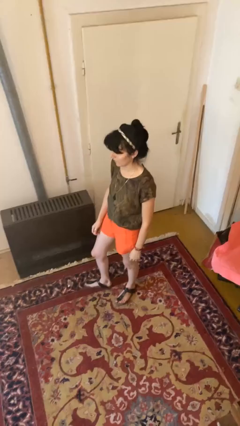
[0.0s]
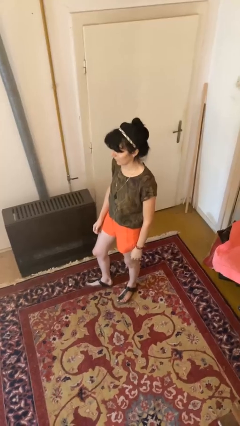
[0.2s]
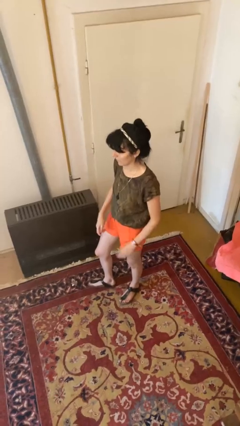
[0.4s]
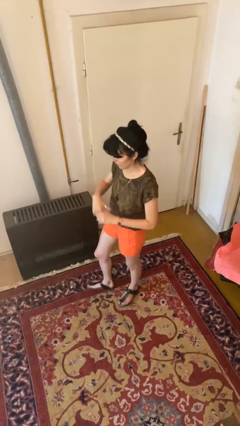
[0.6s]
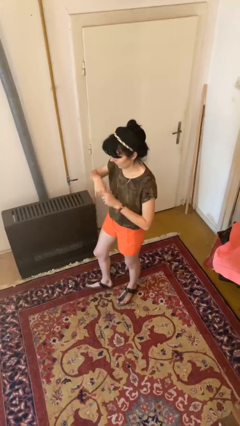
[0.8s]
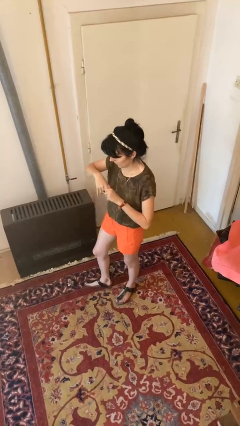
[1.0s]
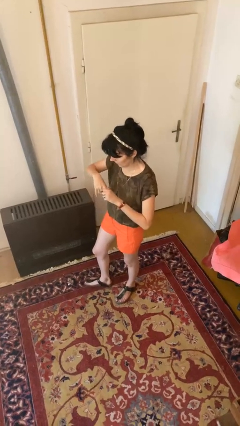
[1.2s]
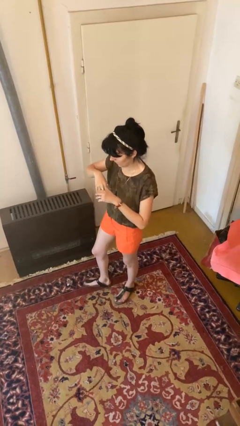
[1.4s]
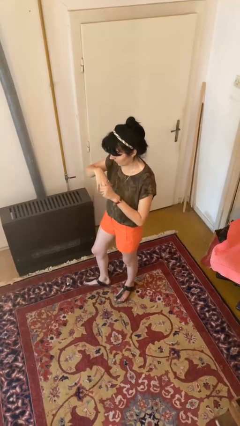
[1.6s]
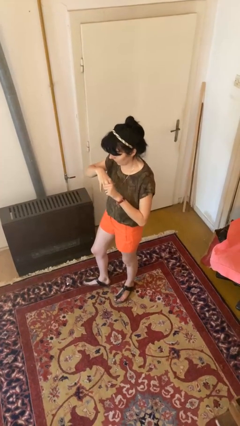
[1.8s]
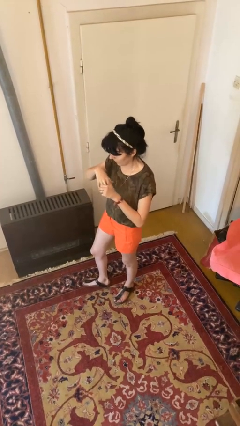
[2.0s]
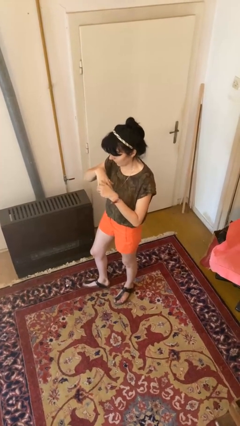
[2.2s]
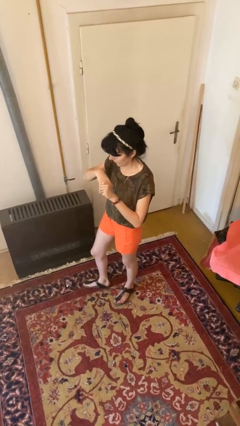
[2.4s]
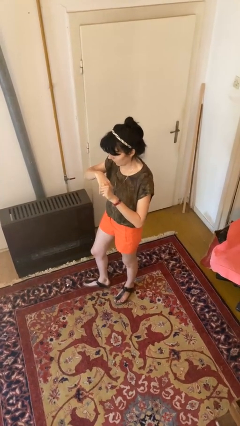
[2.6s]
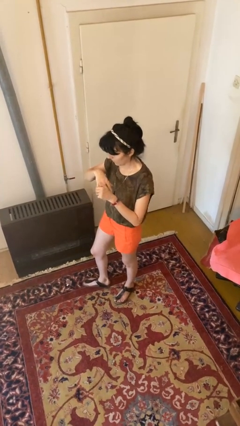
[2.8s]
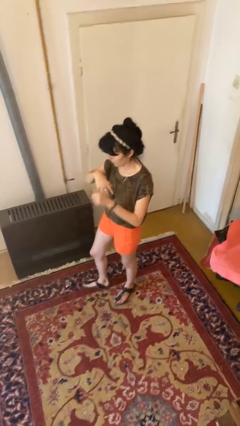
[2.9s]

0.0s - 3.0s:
person cracks knuckles

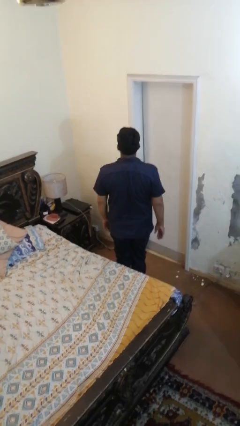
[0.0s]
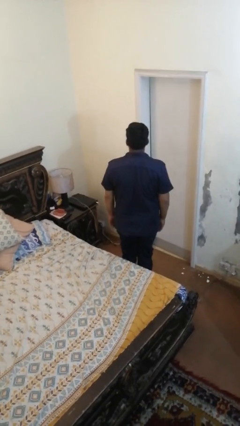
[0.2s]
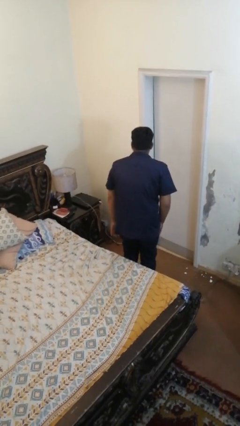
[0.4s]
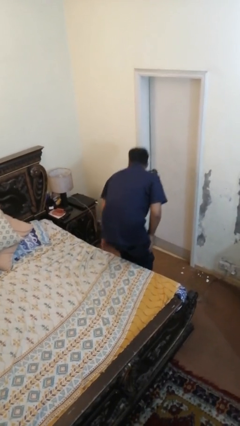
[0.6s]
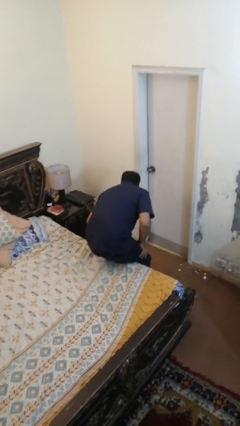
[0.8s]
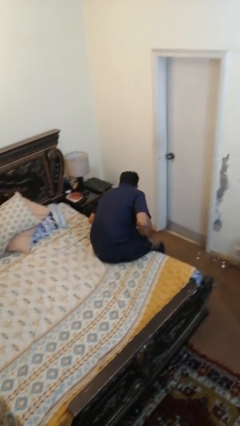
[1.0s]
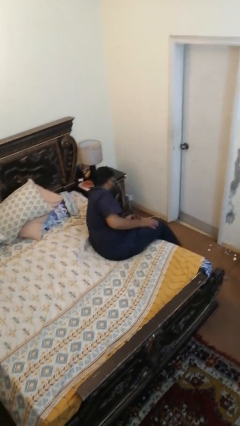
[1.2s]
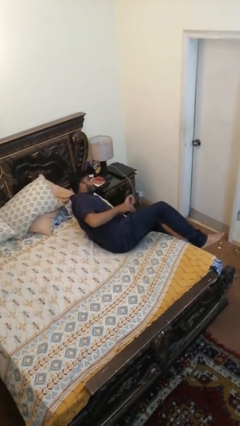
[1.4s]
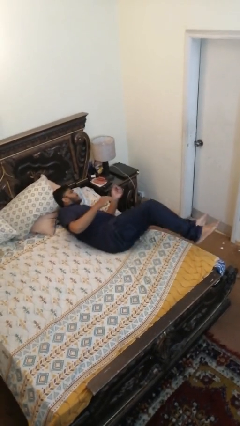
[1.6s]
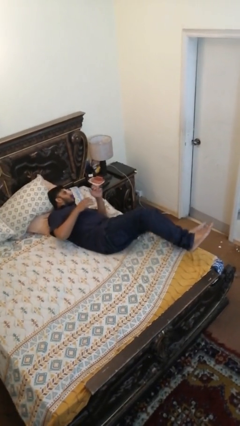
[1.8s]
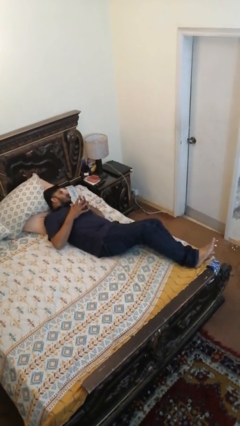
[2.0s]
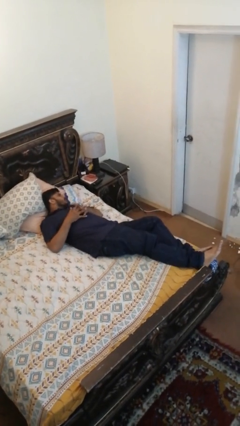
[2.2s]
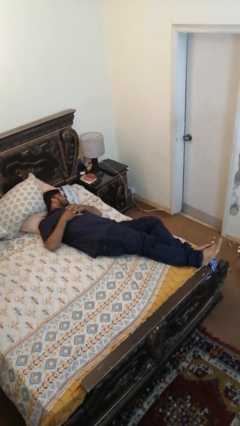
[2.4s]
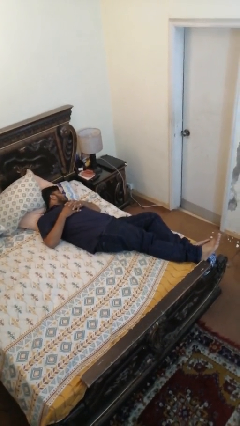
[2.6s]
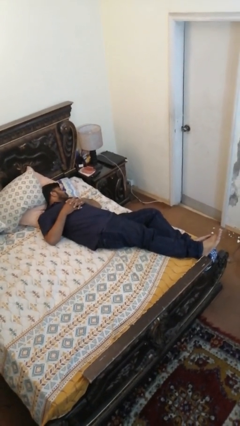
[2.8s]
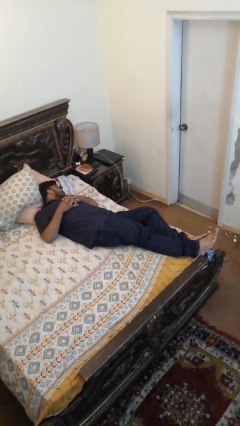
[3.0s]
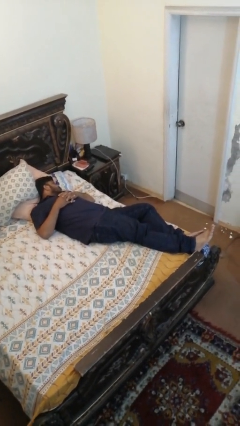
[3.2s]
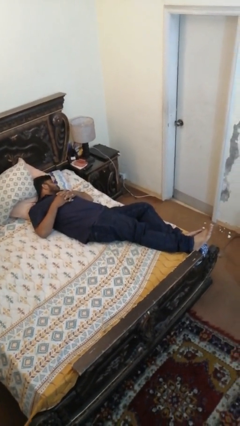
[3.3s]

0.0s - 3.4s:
person lies down on bed

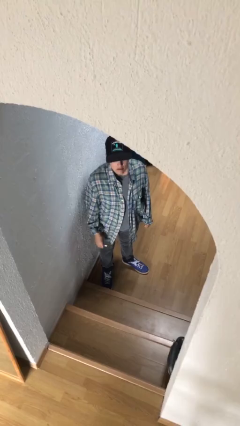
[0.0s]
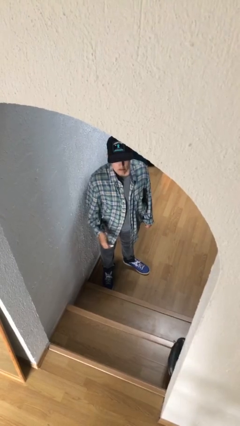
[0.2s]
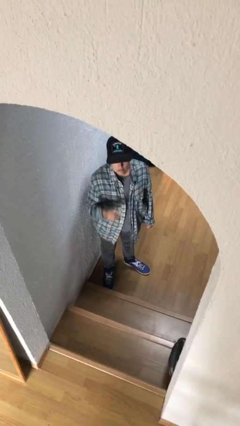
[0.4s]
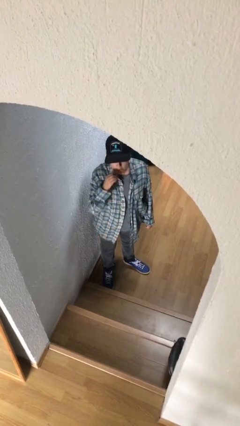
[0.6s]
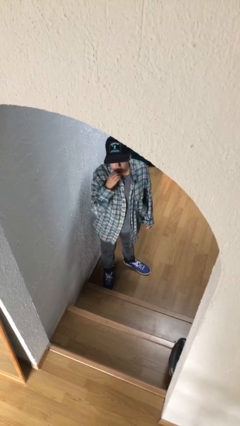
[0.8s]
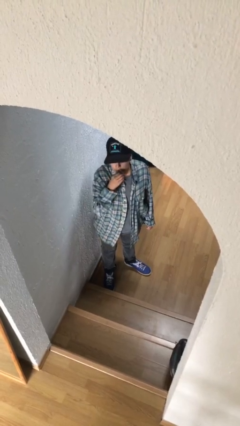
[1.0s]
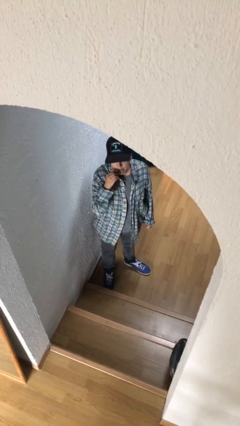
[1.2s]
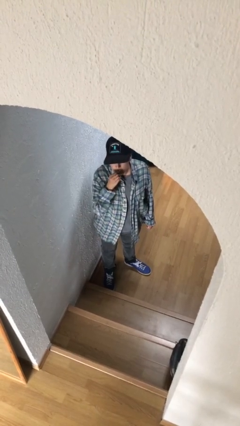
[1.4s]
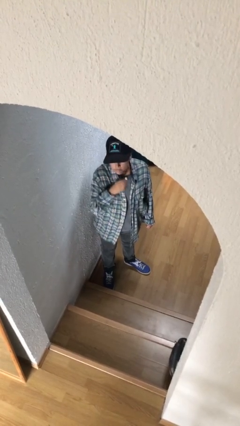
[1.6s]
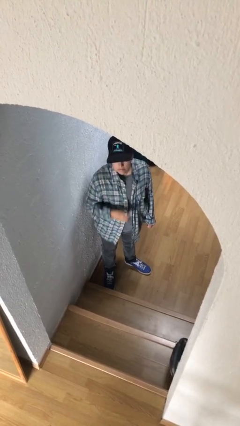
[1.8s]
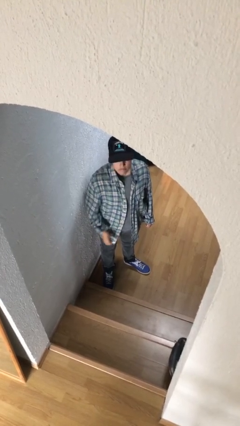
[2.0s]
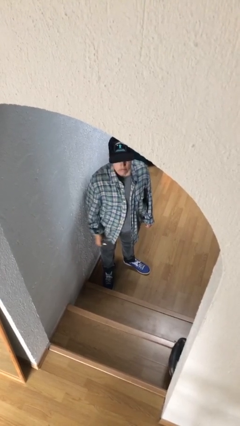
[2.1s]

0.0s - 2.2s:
person applies lip makeup

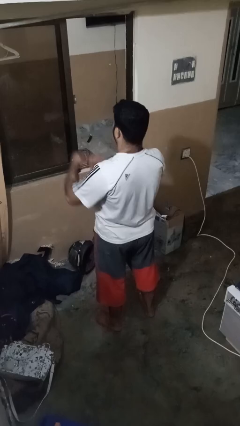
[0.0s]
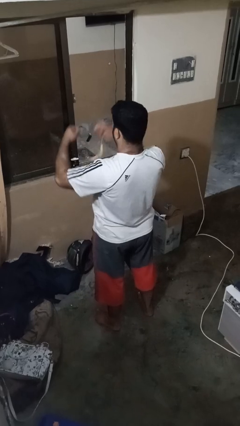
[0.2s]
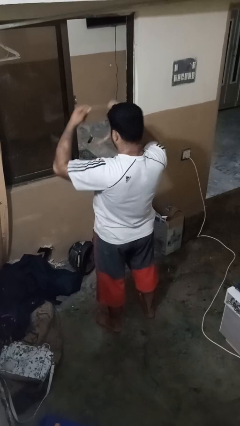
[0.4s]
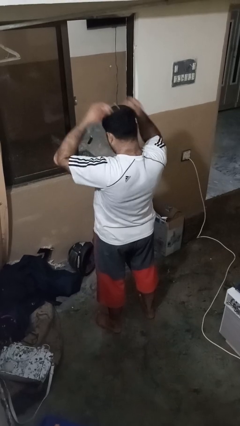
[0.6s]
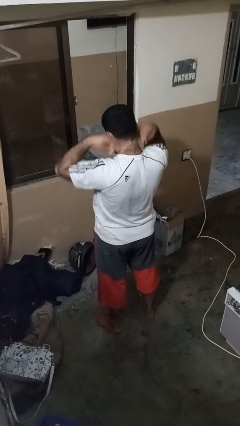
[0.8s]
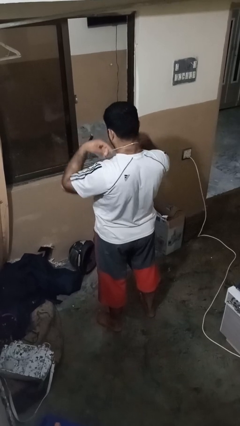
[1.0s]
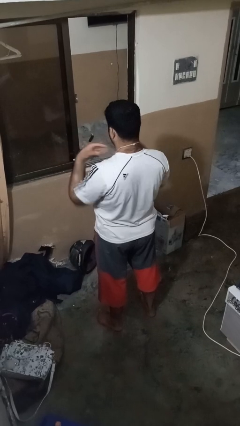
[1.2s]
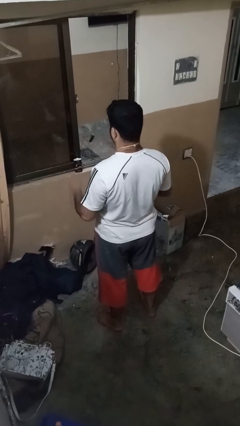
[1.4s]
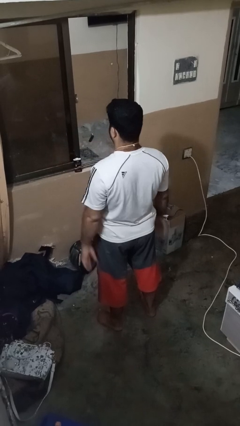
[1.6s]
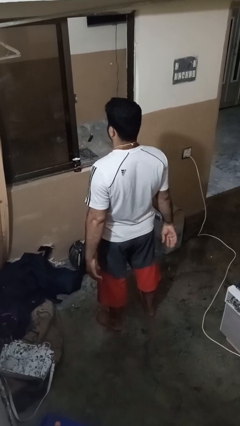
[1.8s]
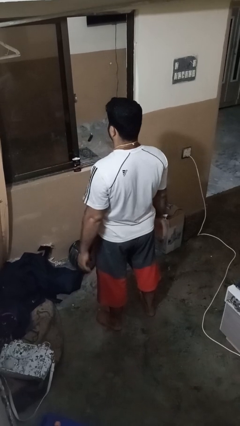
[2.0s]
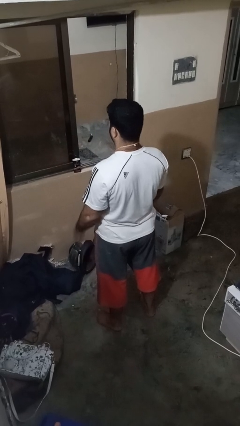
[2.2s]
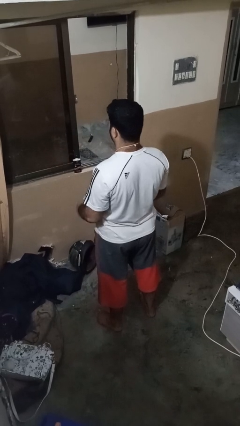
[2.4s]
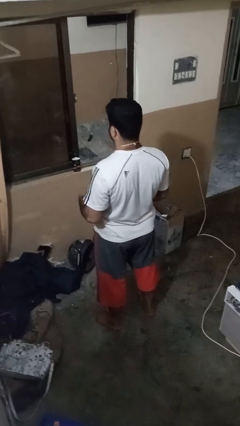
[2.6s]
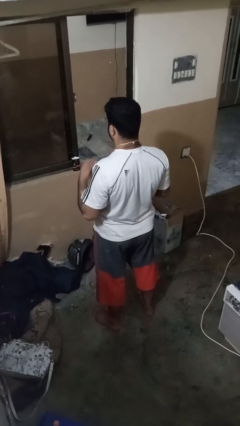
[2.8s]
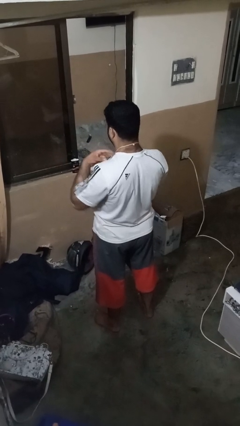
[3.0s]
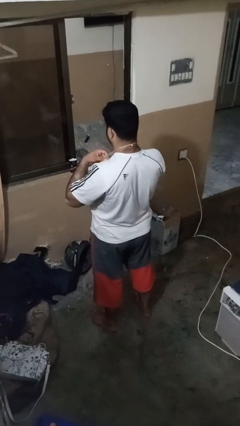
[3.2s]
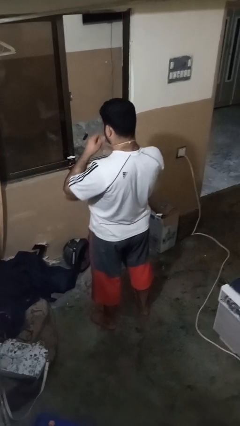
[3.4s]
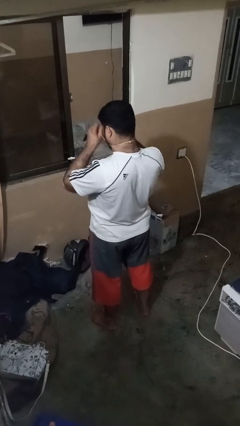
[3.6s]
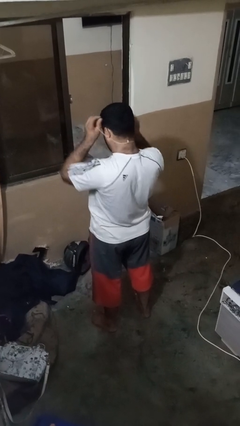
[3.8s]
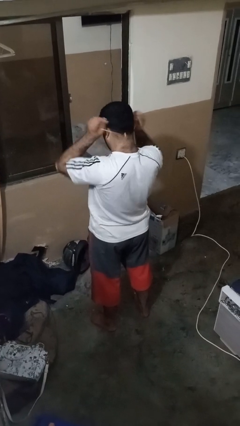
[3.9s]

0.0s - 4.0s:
person puts on necklace

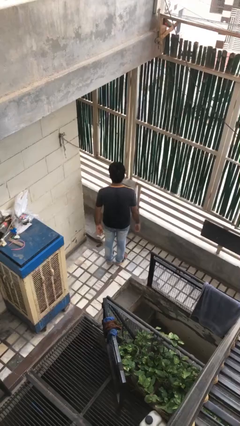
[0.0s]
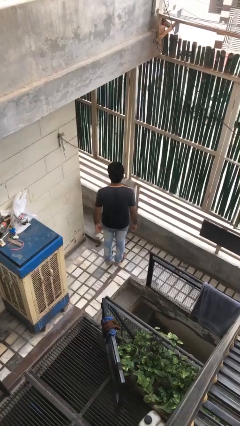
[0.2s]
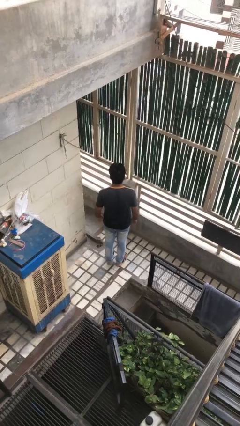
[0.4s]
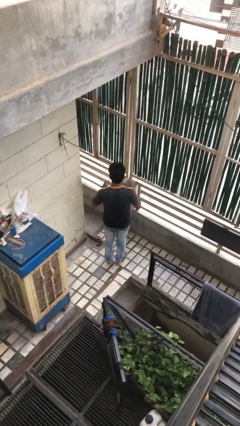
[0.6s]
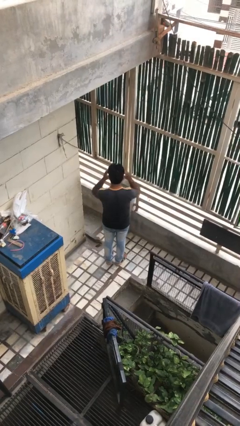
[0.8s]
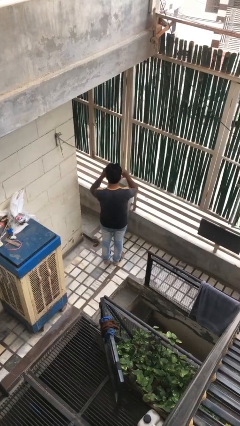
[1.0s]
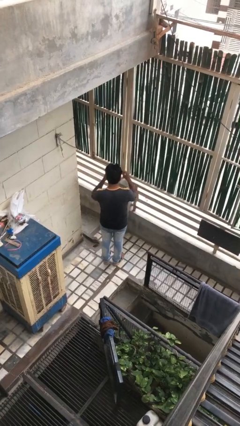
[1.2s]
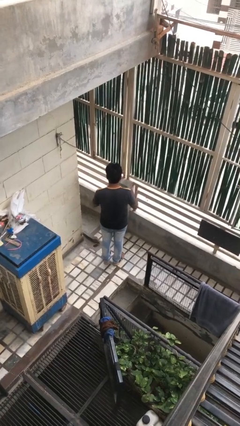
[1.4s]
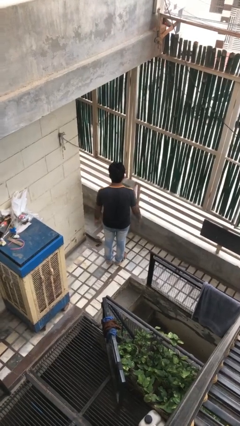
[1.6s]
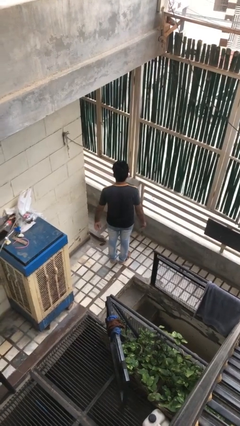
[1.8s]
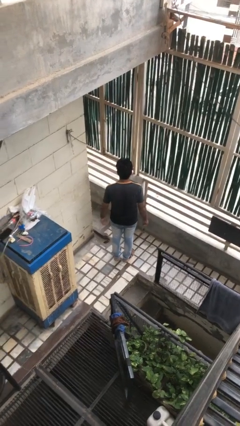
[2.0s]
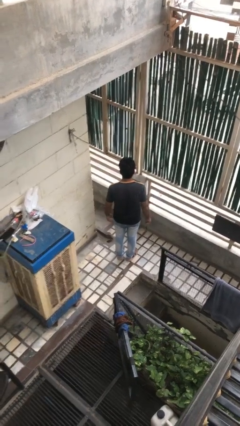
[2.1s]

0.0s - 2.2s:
person takes off glasses

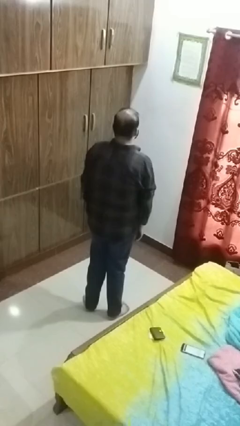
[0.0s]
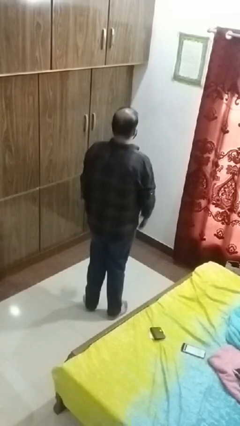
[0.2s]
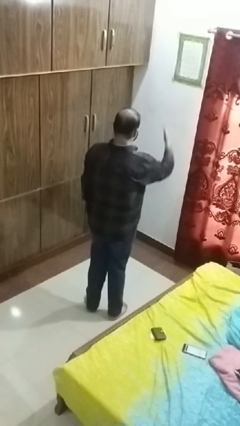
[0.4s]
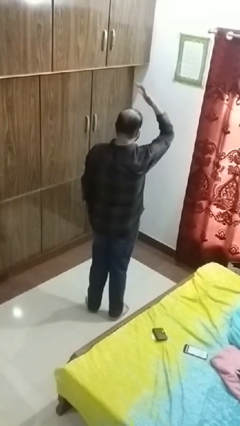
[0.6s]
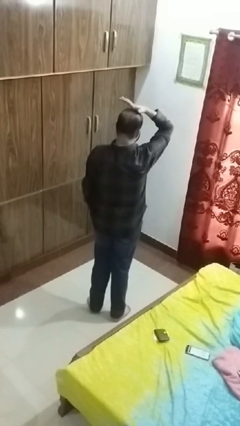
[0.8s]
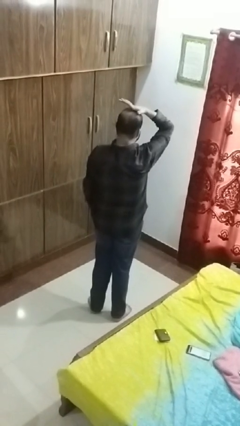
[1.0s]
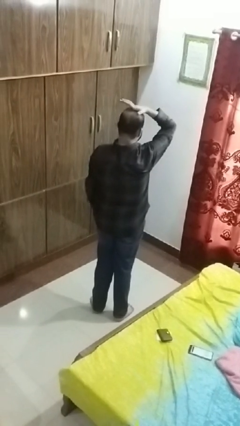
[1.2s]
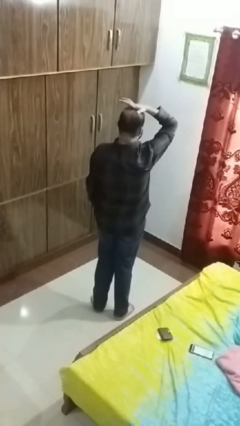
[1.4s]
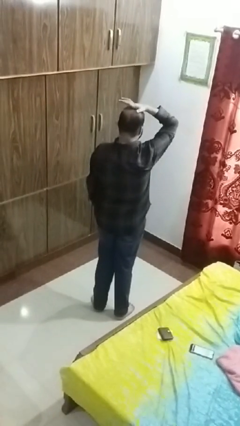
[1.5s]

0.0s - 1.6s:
person pats head

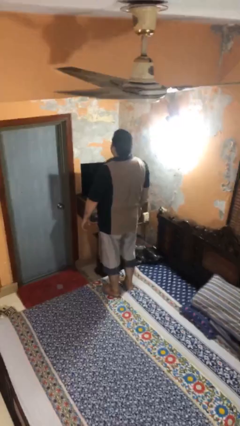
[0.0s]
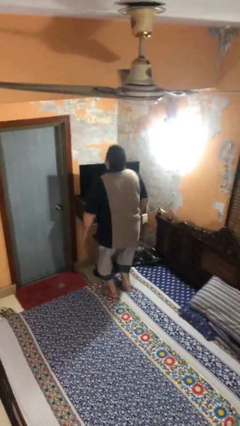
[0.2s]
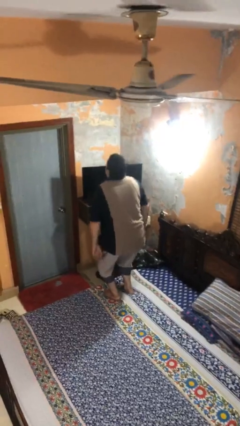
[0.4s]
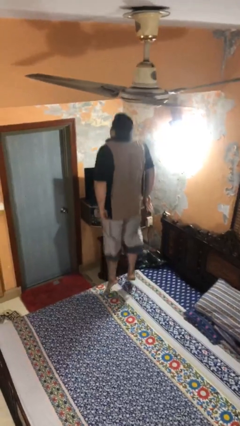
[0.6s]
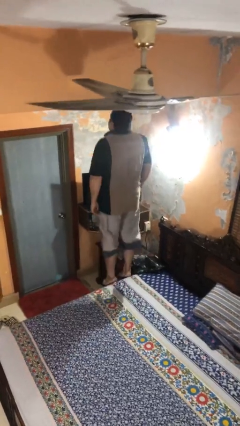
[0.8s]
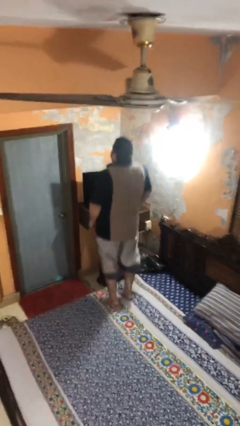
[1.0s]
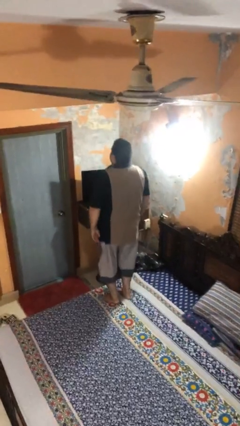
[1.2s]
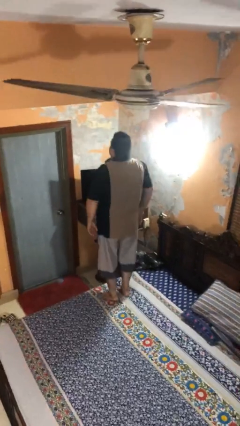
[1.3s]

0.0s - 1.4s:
person jumps on bed
